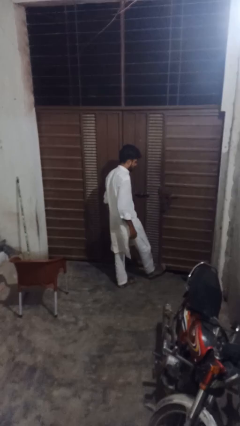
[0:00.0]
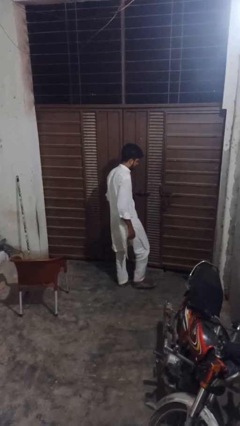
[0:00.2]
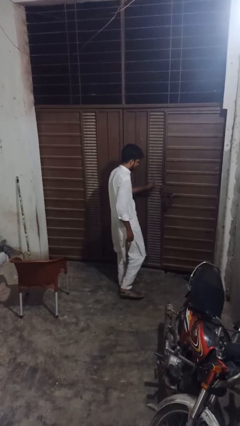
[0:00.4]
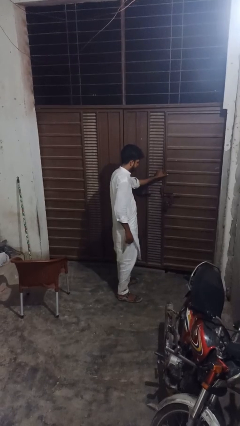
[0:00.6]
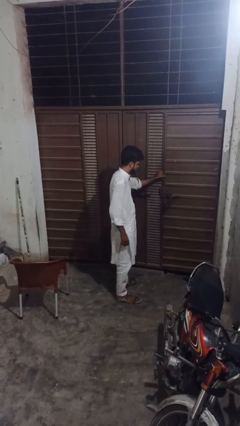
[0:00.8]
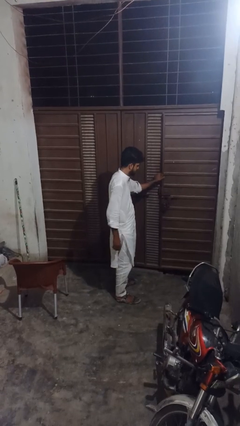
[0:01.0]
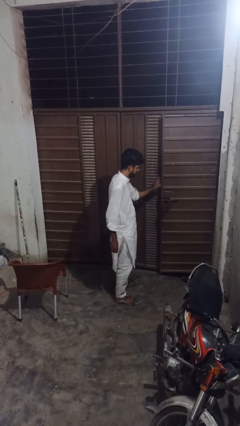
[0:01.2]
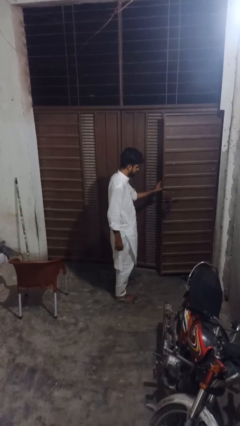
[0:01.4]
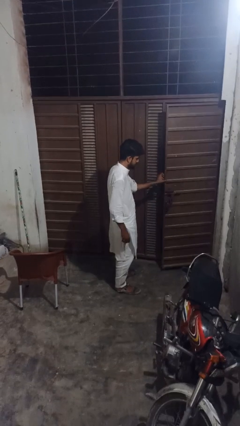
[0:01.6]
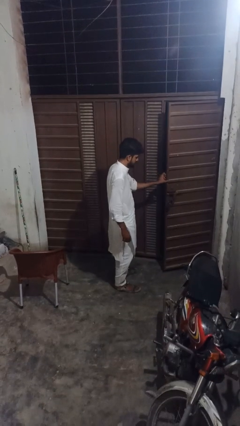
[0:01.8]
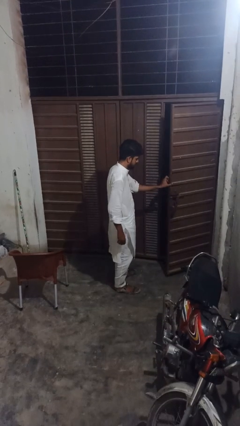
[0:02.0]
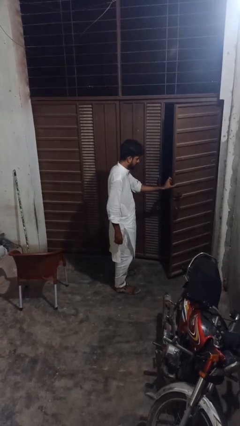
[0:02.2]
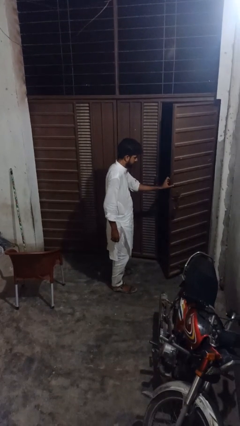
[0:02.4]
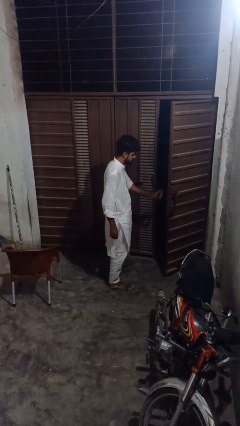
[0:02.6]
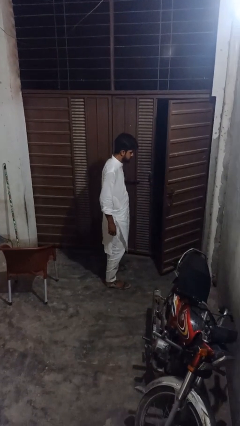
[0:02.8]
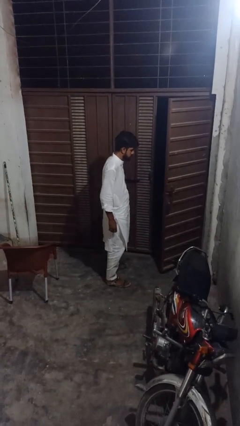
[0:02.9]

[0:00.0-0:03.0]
person opens facility door

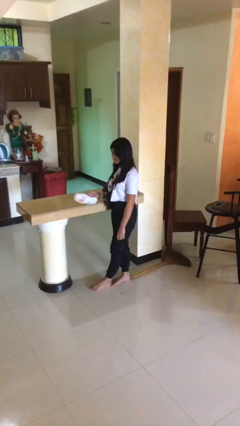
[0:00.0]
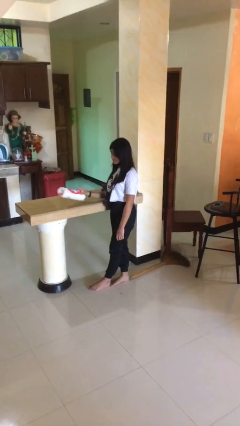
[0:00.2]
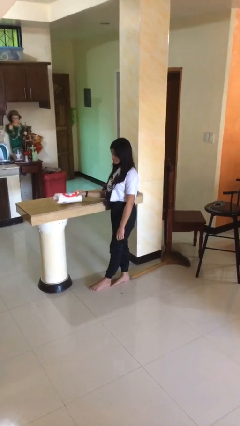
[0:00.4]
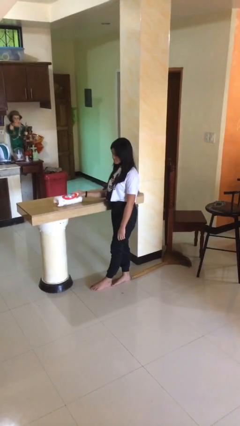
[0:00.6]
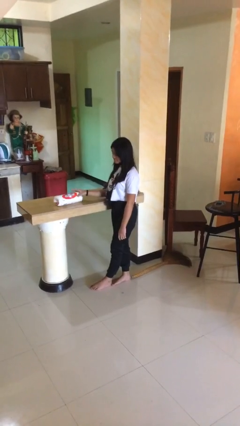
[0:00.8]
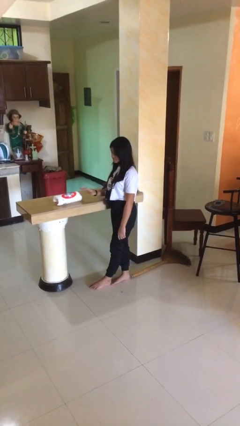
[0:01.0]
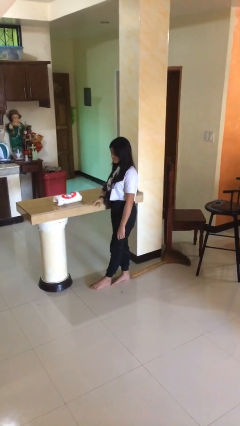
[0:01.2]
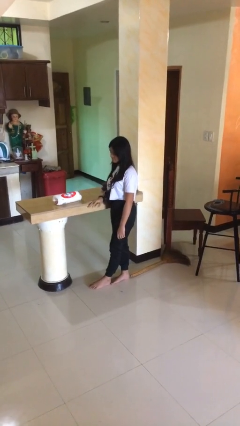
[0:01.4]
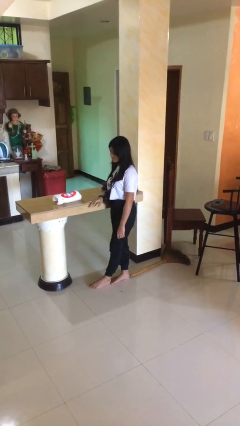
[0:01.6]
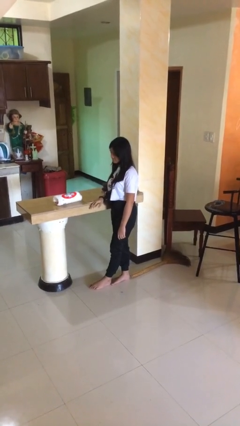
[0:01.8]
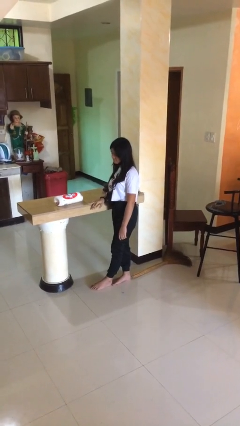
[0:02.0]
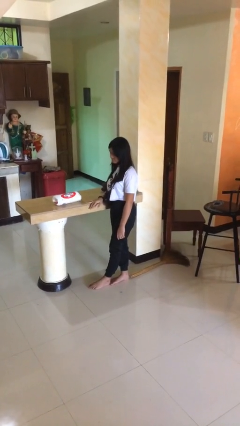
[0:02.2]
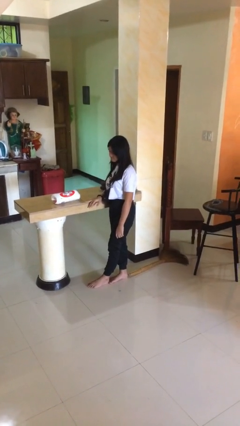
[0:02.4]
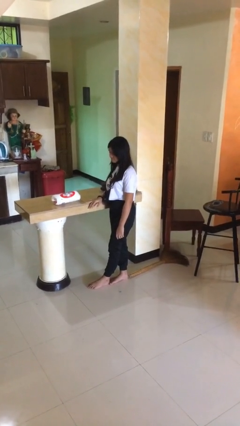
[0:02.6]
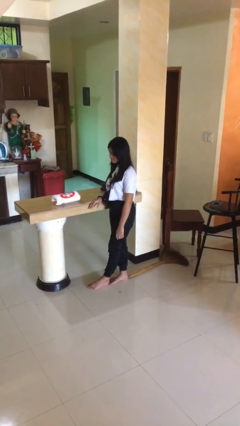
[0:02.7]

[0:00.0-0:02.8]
person puts down object on countertop

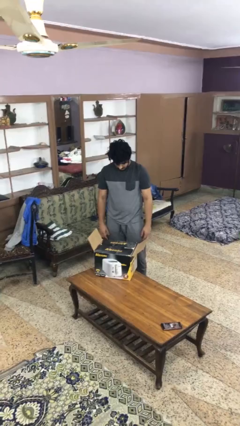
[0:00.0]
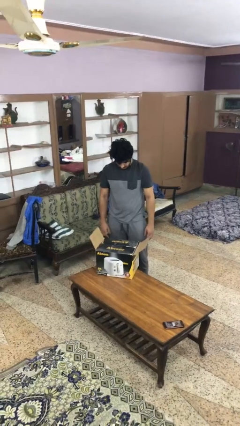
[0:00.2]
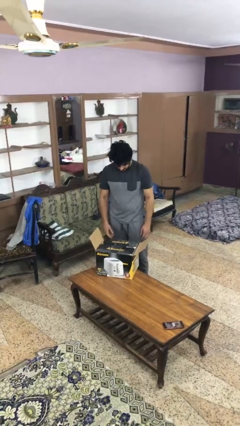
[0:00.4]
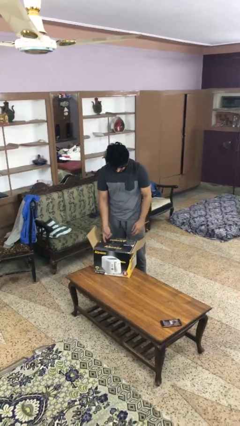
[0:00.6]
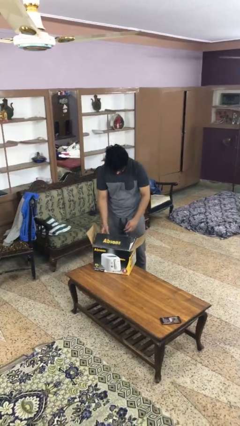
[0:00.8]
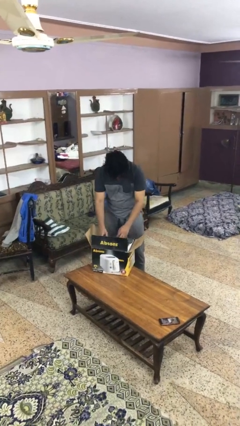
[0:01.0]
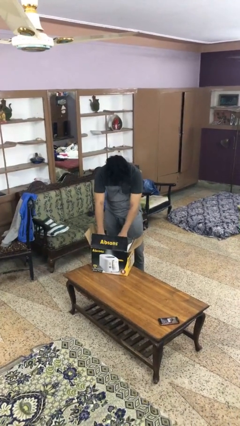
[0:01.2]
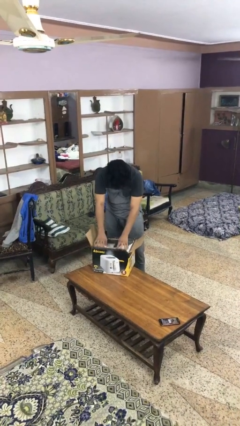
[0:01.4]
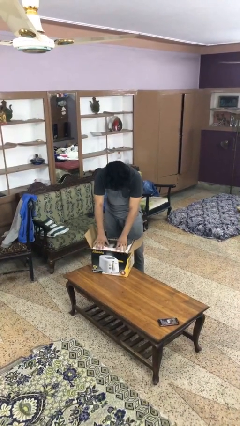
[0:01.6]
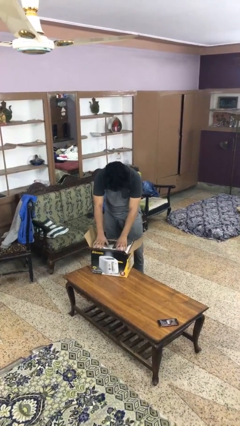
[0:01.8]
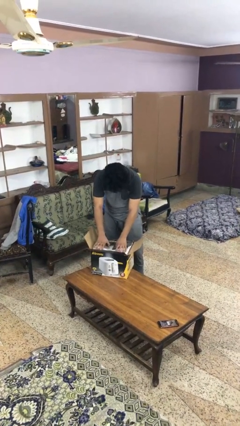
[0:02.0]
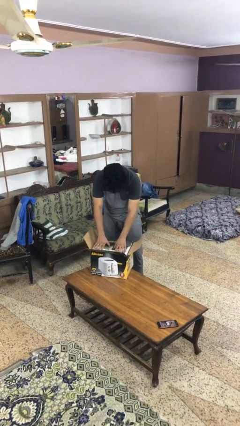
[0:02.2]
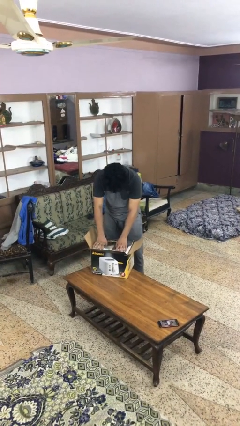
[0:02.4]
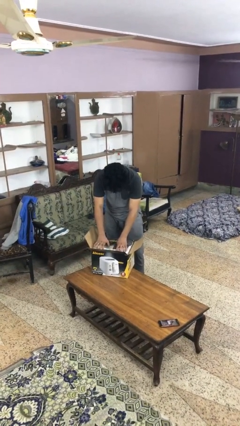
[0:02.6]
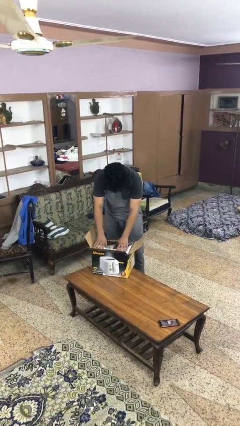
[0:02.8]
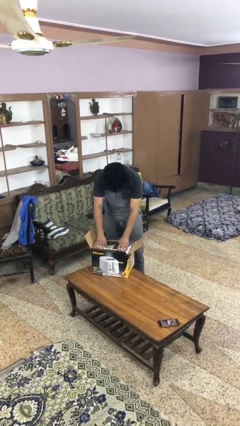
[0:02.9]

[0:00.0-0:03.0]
person searches in box

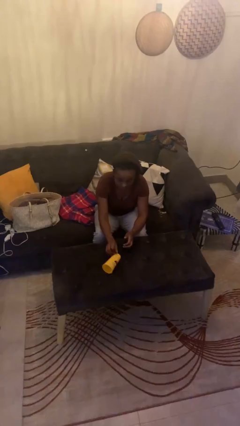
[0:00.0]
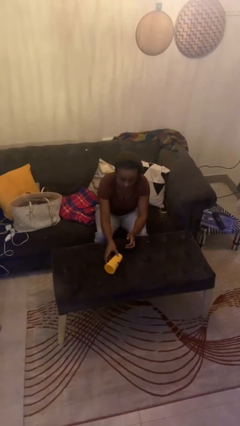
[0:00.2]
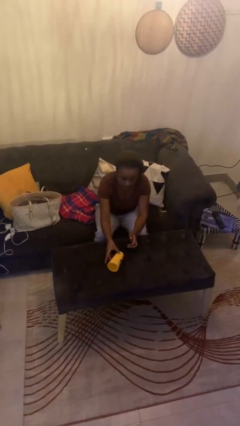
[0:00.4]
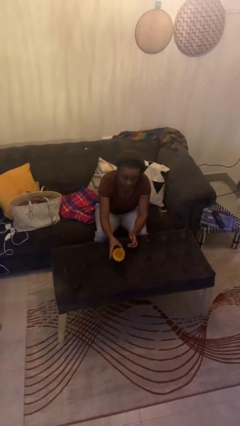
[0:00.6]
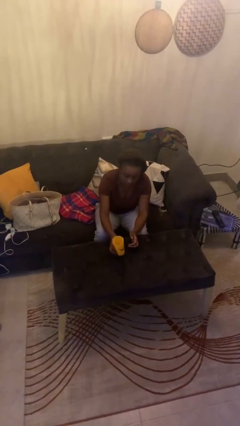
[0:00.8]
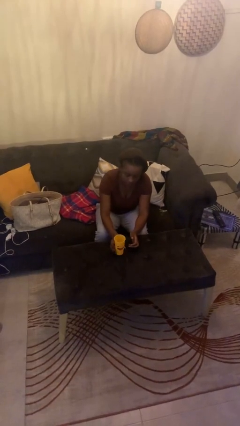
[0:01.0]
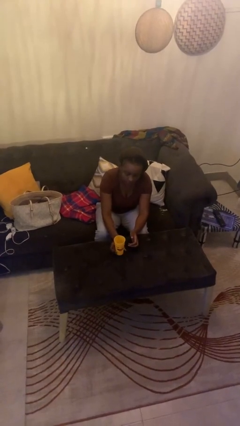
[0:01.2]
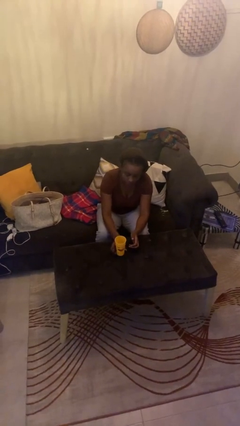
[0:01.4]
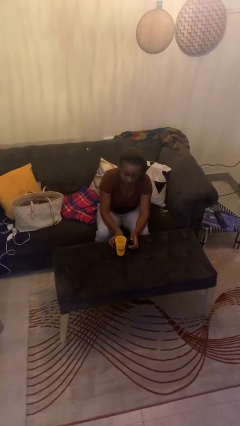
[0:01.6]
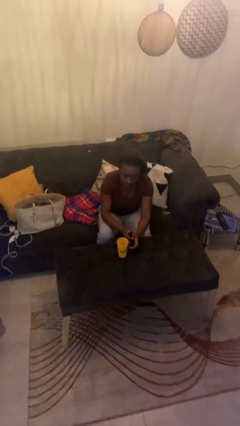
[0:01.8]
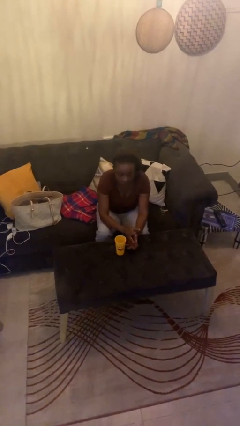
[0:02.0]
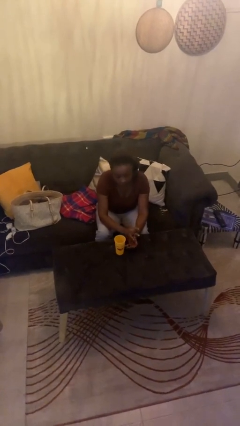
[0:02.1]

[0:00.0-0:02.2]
person sets upright glass

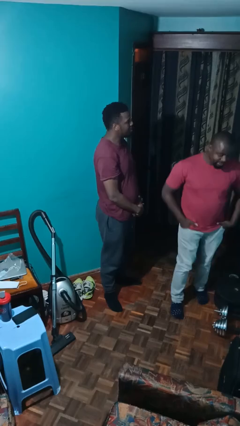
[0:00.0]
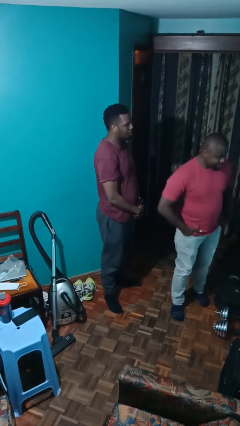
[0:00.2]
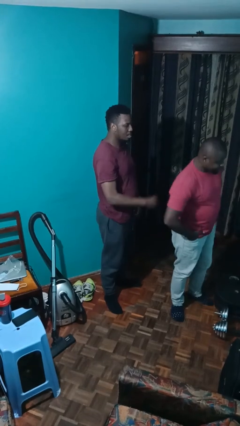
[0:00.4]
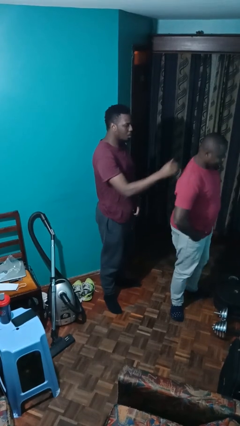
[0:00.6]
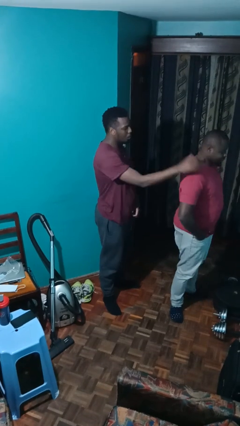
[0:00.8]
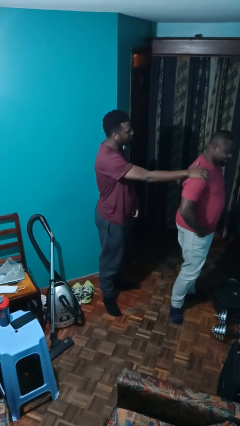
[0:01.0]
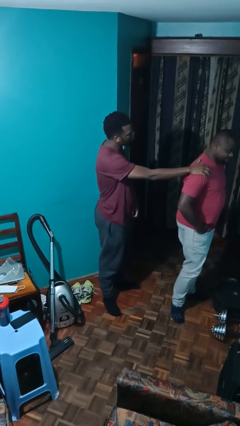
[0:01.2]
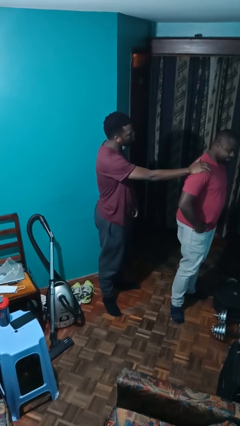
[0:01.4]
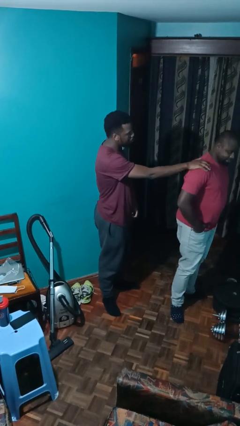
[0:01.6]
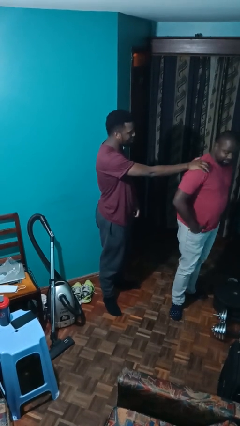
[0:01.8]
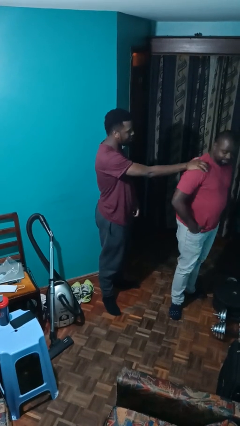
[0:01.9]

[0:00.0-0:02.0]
person grabs person by shoulder

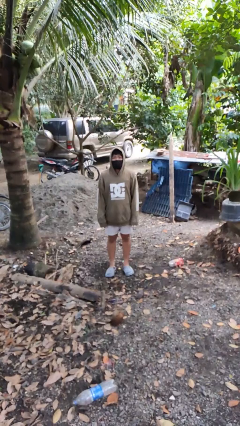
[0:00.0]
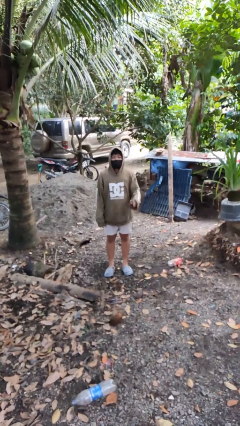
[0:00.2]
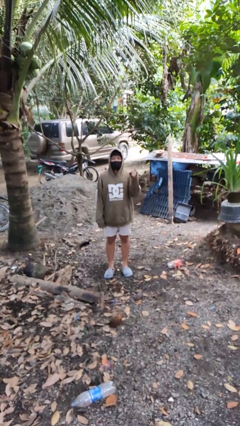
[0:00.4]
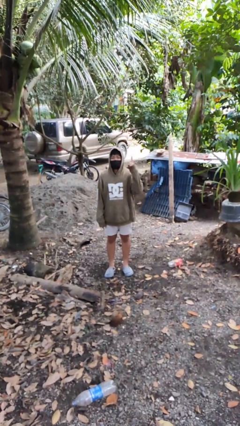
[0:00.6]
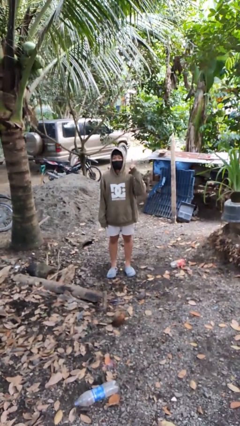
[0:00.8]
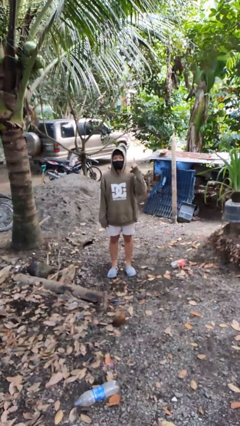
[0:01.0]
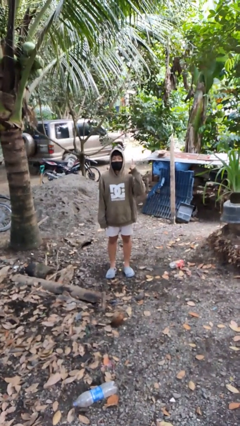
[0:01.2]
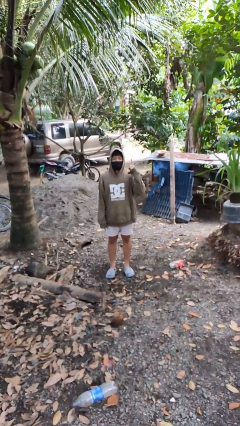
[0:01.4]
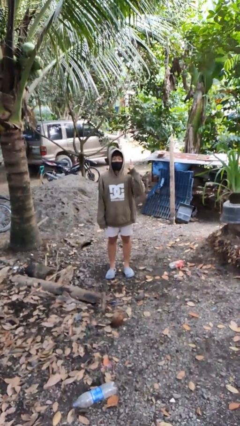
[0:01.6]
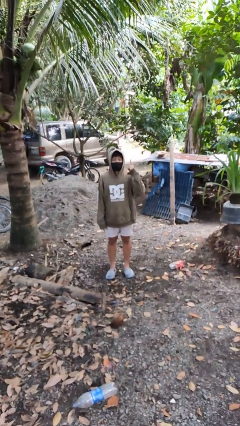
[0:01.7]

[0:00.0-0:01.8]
person gestures number one

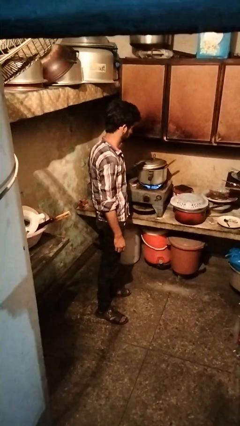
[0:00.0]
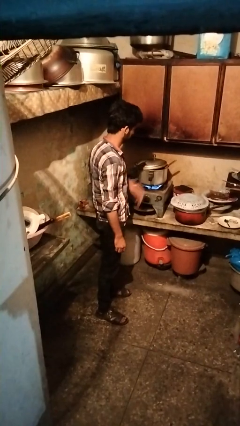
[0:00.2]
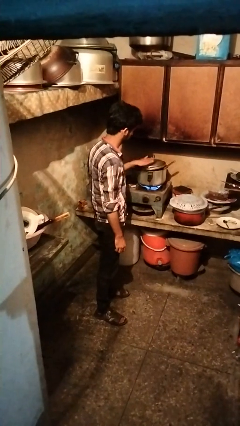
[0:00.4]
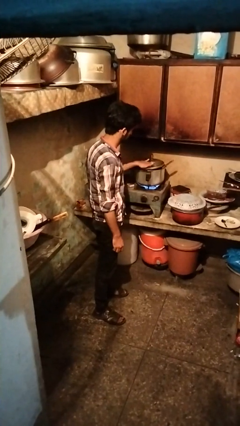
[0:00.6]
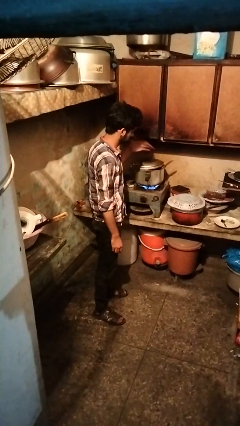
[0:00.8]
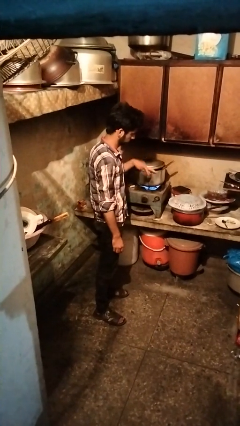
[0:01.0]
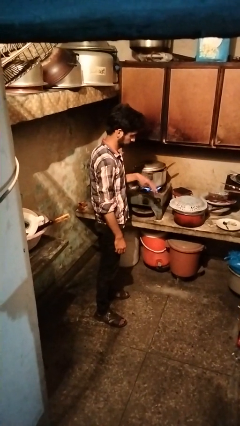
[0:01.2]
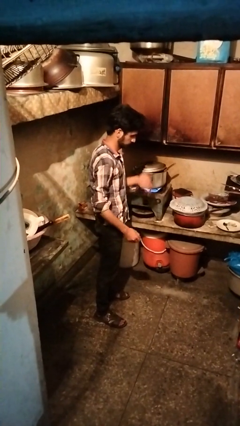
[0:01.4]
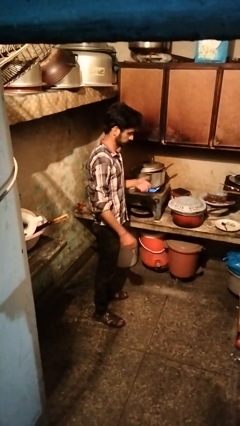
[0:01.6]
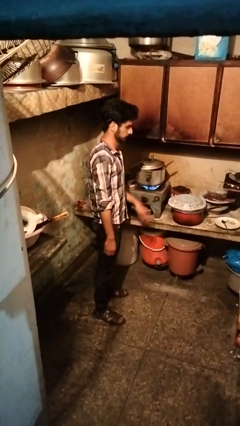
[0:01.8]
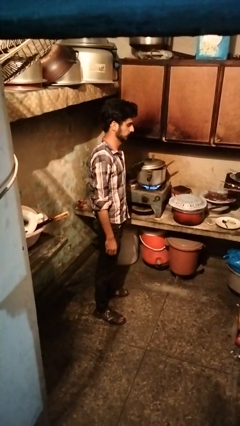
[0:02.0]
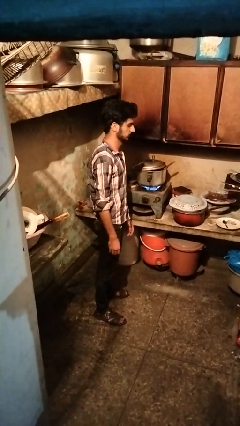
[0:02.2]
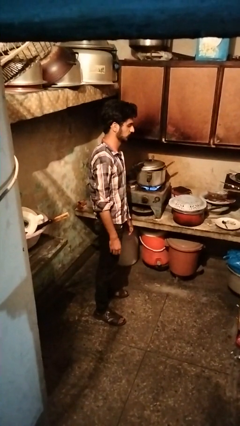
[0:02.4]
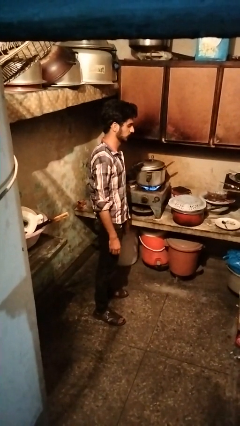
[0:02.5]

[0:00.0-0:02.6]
person burns hand
